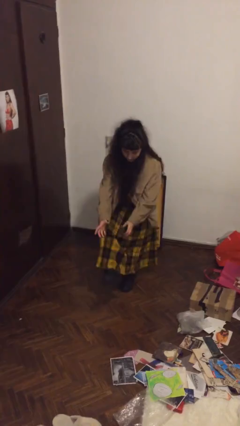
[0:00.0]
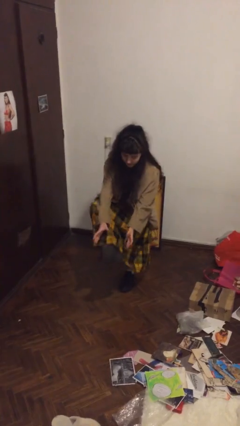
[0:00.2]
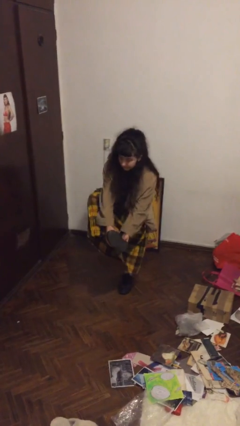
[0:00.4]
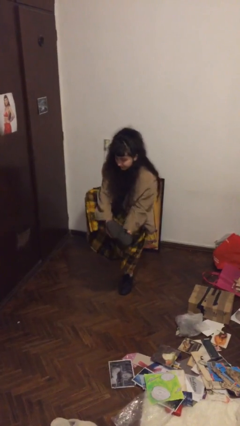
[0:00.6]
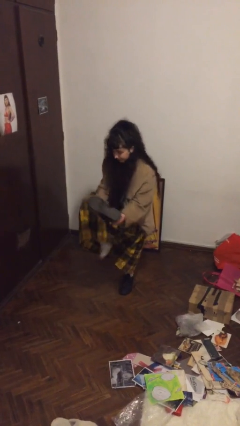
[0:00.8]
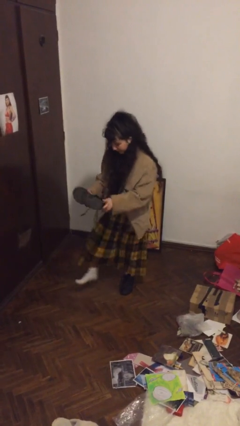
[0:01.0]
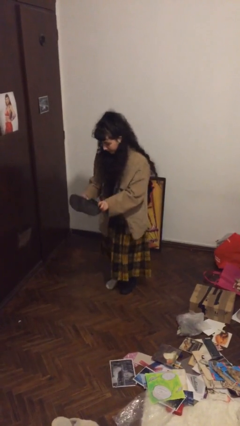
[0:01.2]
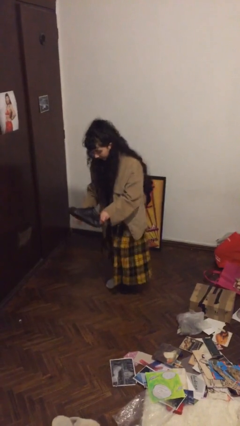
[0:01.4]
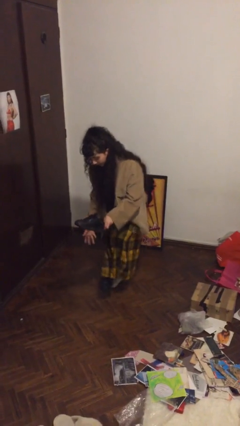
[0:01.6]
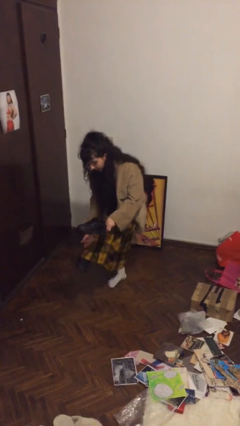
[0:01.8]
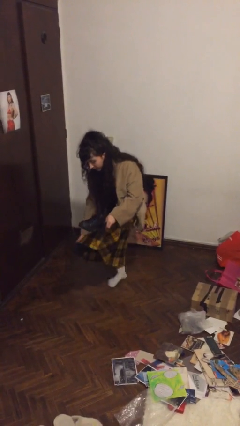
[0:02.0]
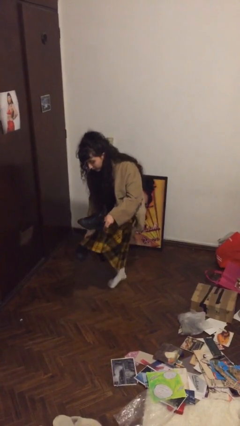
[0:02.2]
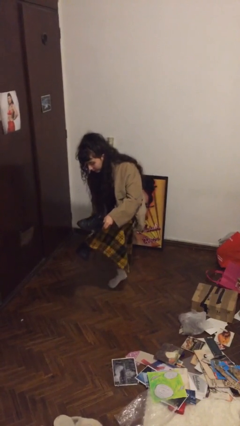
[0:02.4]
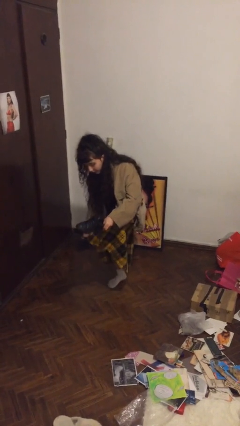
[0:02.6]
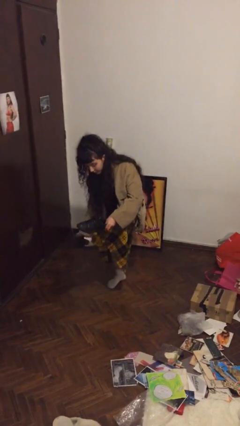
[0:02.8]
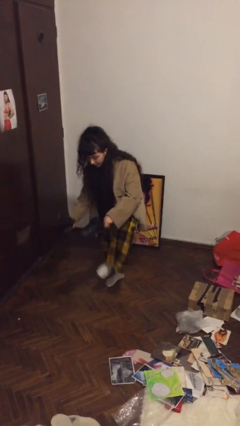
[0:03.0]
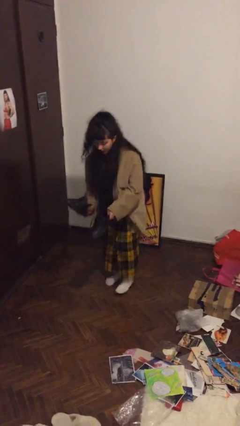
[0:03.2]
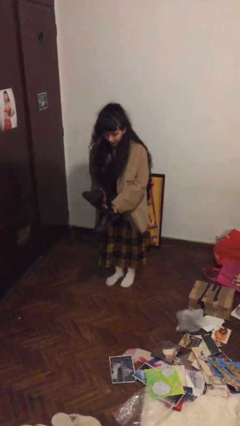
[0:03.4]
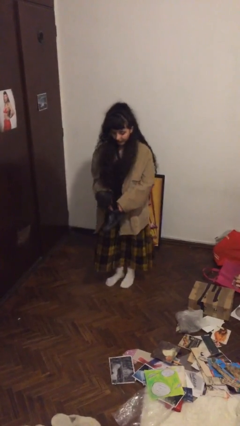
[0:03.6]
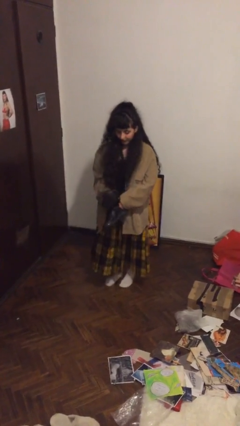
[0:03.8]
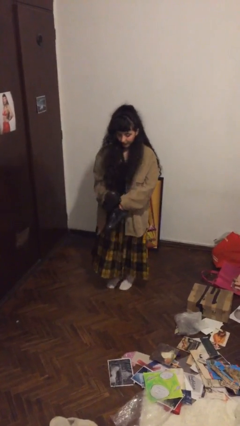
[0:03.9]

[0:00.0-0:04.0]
person takes off shoes

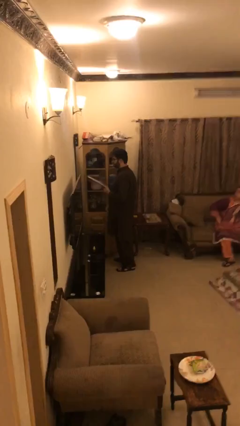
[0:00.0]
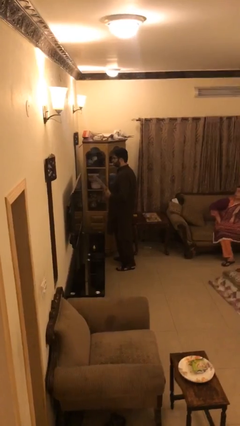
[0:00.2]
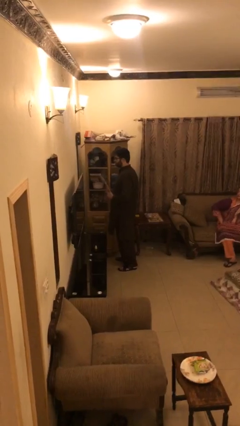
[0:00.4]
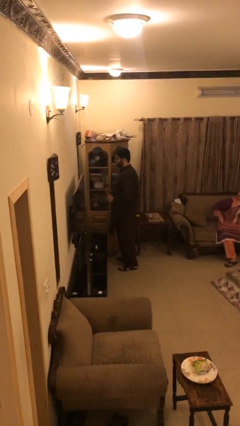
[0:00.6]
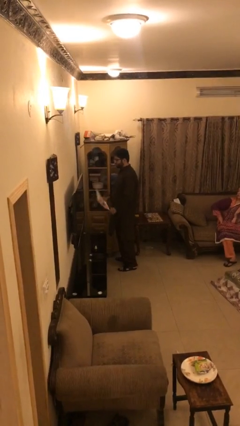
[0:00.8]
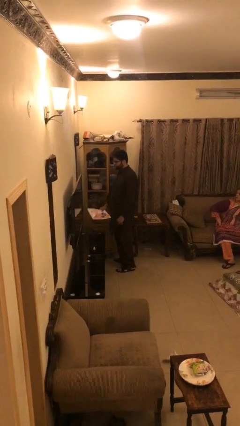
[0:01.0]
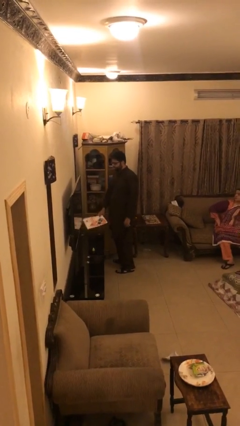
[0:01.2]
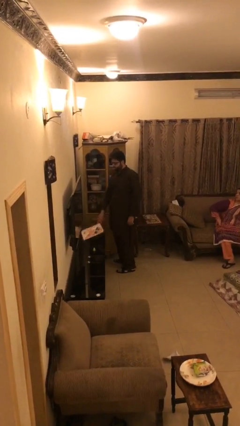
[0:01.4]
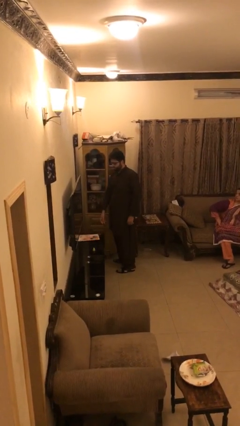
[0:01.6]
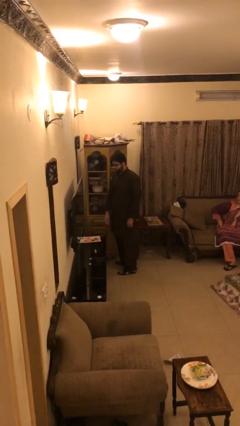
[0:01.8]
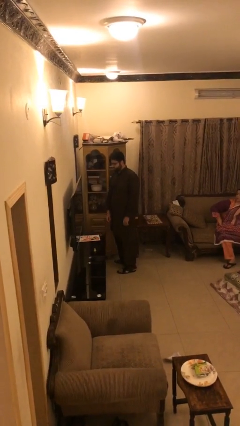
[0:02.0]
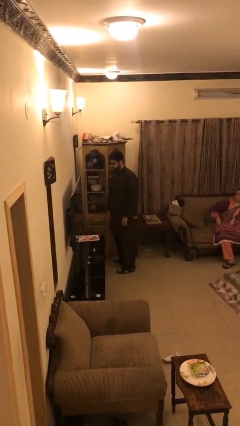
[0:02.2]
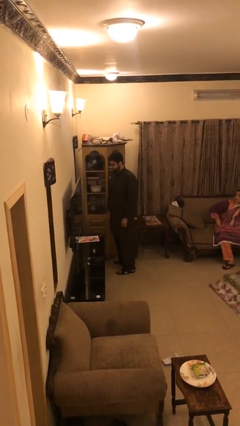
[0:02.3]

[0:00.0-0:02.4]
person puts down object on table

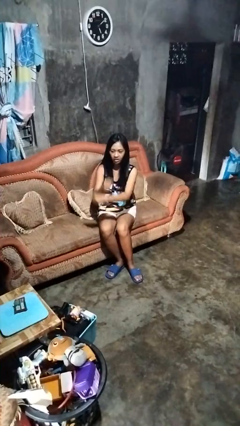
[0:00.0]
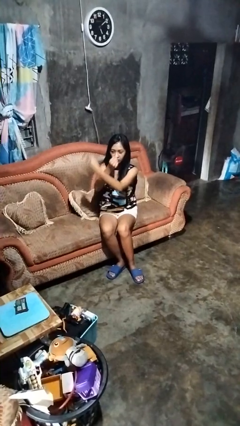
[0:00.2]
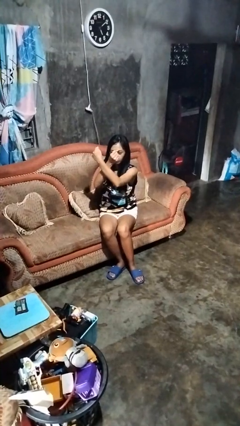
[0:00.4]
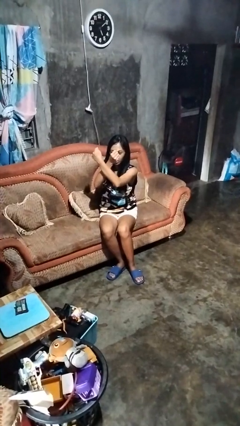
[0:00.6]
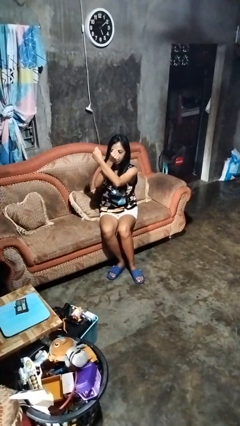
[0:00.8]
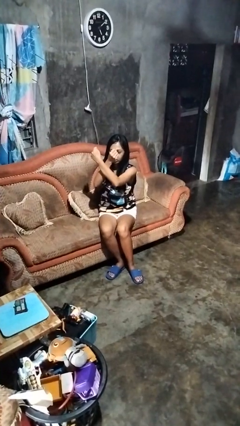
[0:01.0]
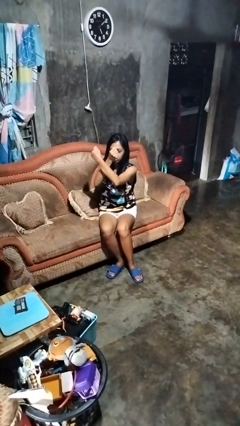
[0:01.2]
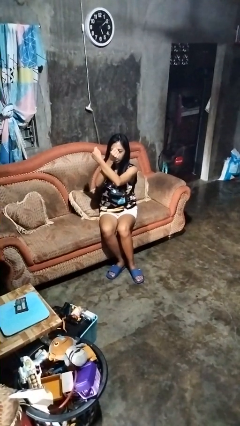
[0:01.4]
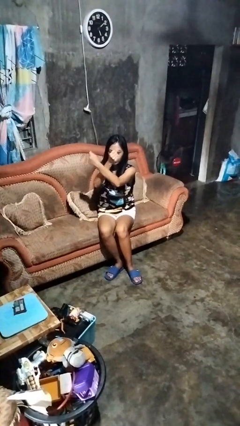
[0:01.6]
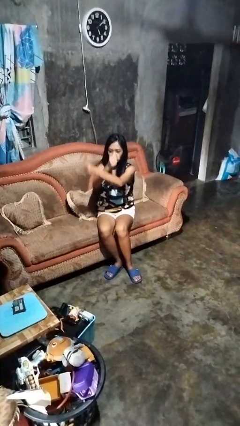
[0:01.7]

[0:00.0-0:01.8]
person gestures arms x

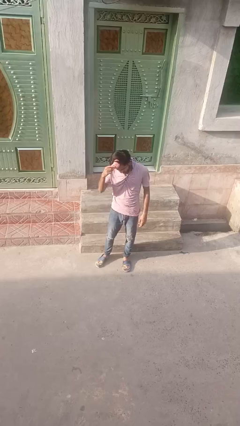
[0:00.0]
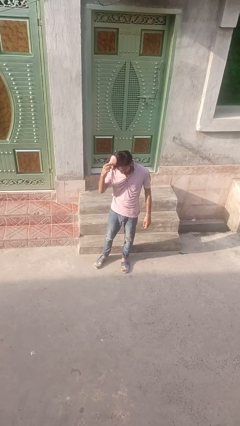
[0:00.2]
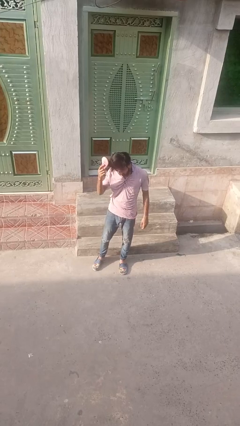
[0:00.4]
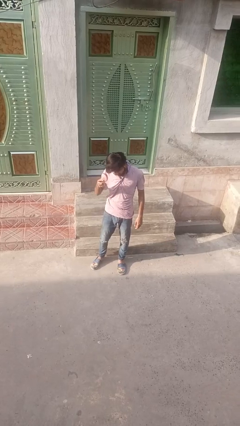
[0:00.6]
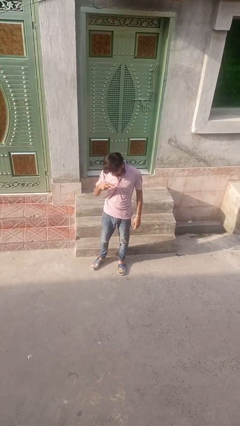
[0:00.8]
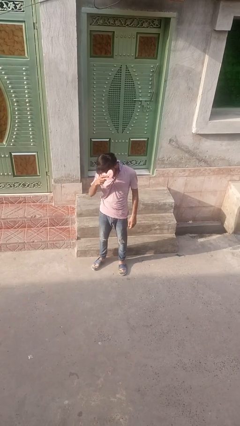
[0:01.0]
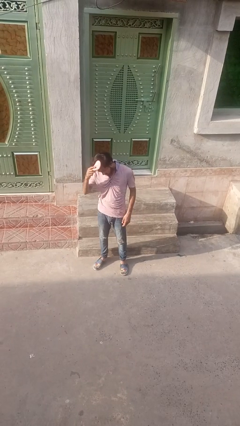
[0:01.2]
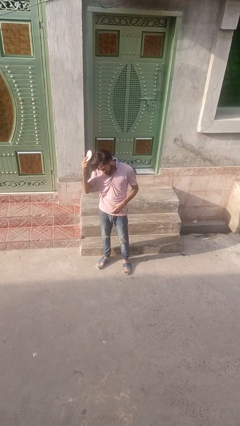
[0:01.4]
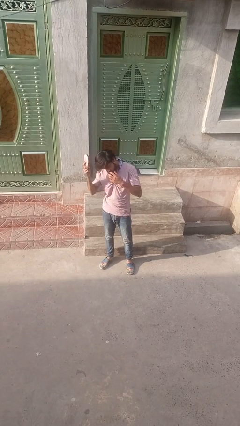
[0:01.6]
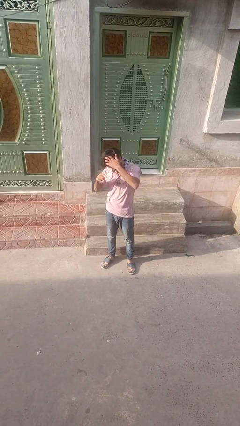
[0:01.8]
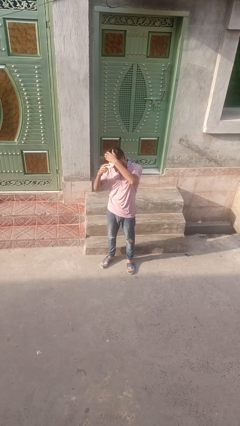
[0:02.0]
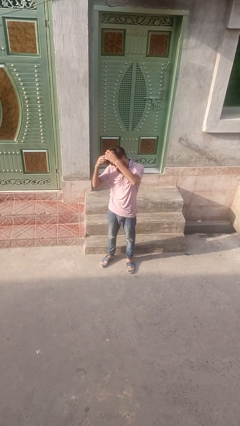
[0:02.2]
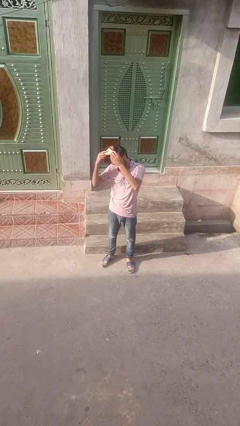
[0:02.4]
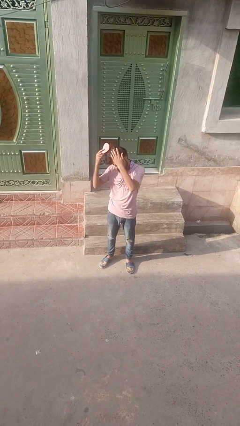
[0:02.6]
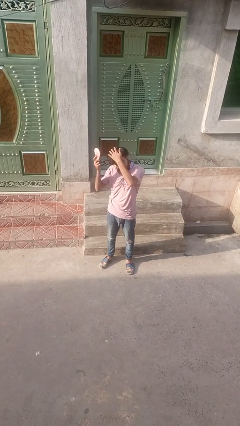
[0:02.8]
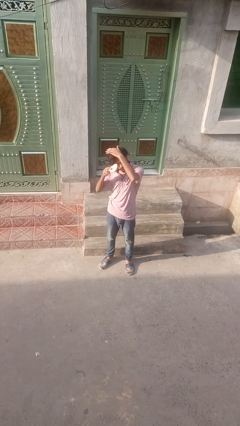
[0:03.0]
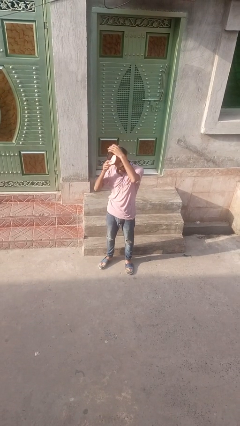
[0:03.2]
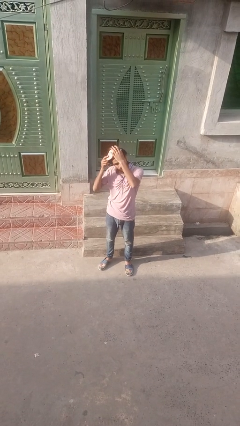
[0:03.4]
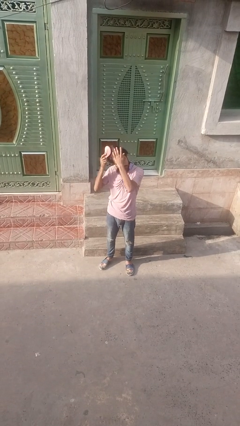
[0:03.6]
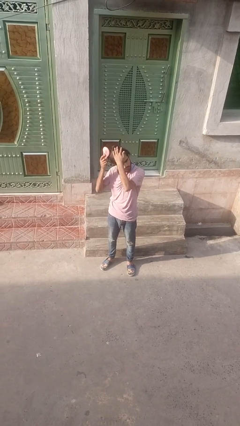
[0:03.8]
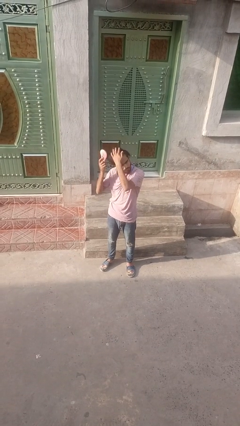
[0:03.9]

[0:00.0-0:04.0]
person brushes hair

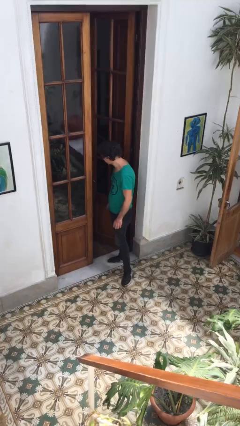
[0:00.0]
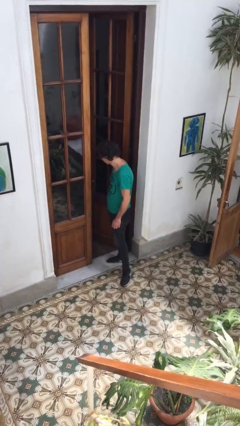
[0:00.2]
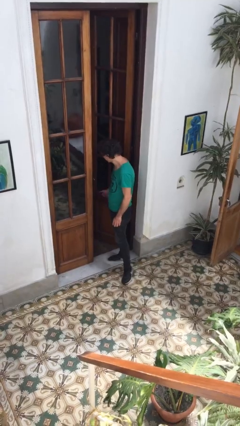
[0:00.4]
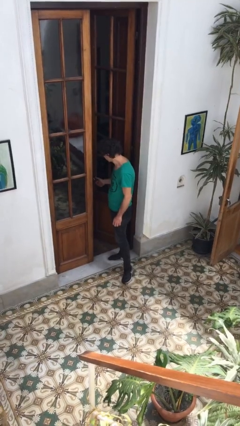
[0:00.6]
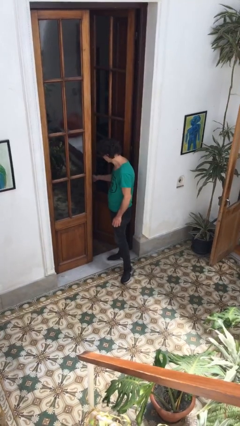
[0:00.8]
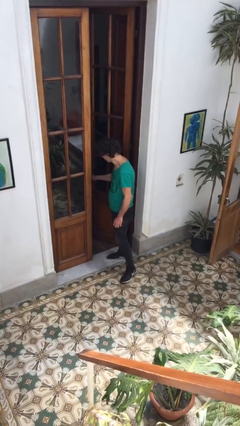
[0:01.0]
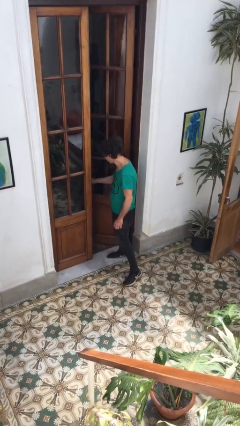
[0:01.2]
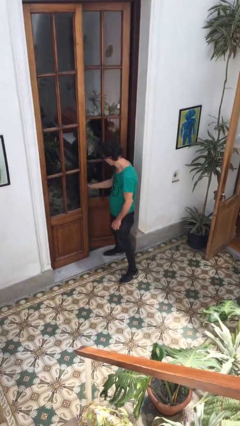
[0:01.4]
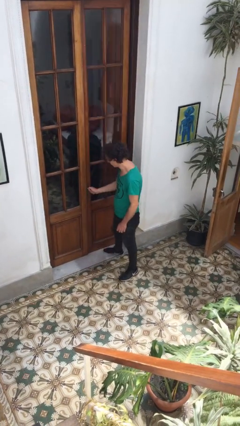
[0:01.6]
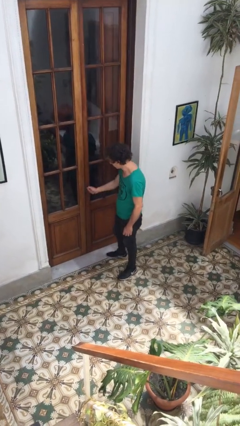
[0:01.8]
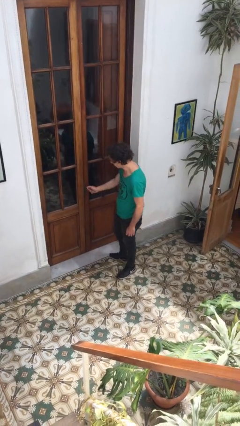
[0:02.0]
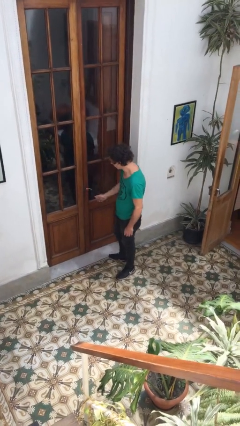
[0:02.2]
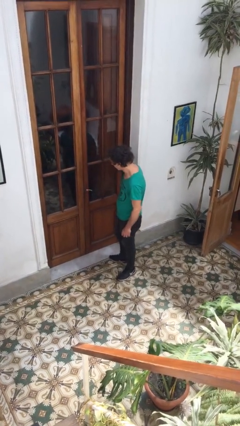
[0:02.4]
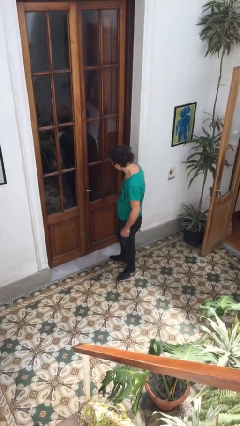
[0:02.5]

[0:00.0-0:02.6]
person closes facility door

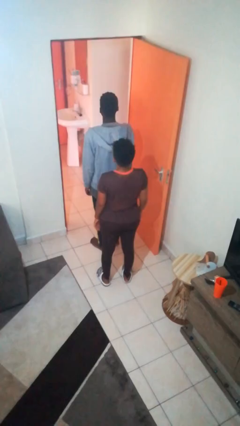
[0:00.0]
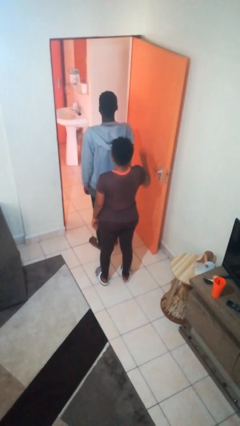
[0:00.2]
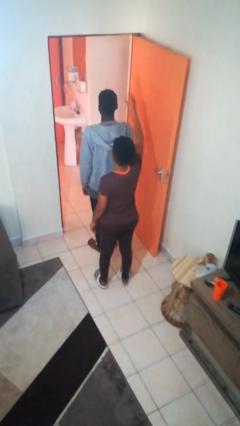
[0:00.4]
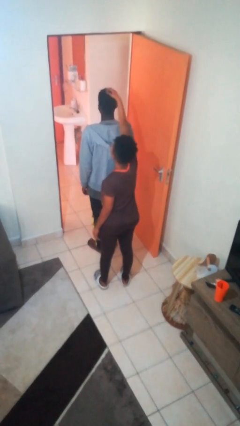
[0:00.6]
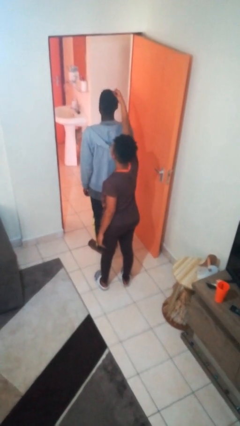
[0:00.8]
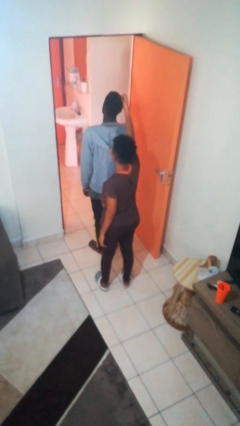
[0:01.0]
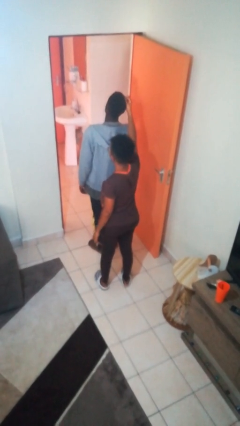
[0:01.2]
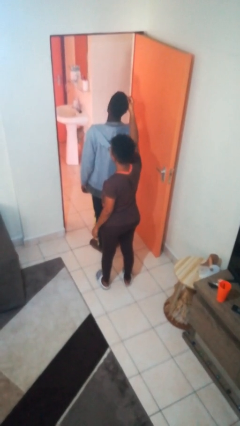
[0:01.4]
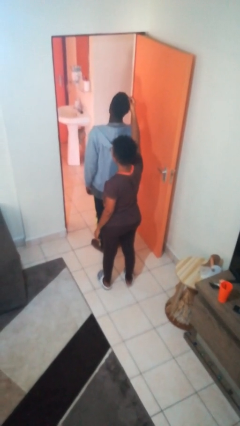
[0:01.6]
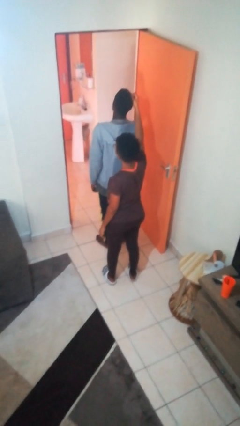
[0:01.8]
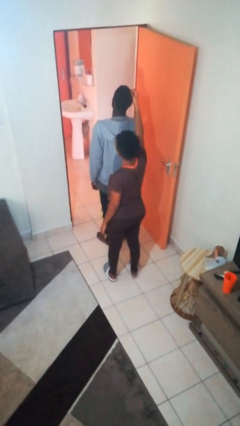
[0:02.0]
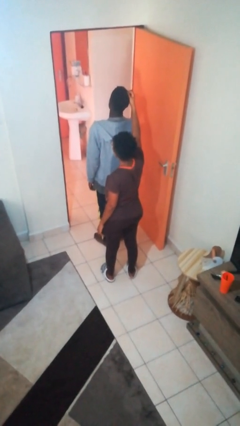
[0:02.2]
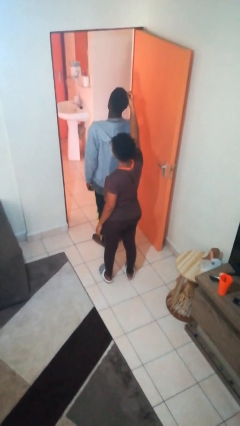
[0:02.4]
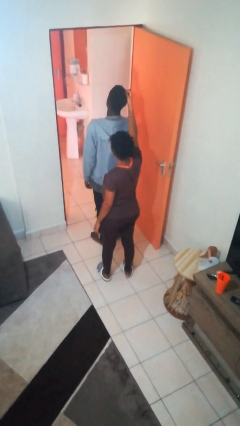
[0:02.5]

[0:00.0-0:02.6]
person grabs person by hair
